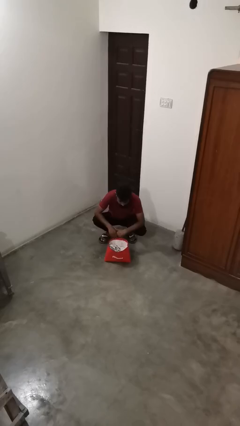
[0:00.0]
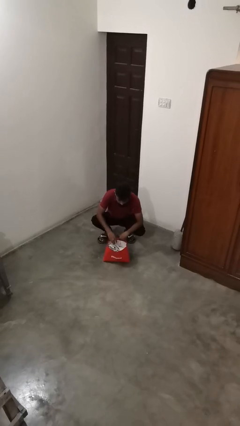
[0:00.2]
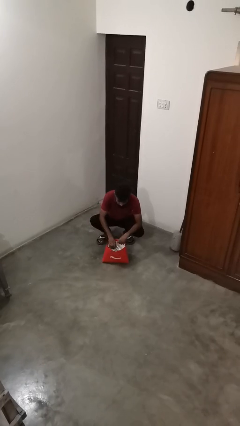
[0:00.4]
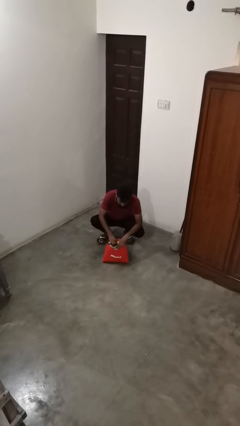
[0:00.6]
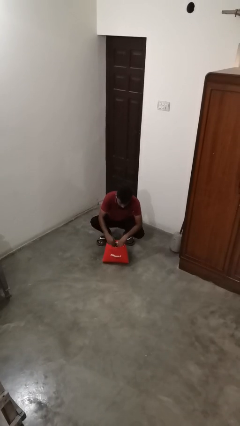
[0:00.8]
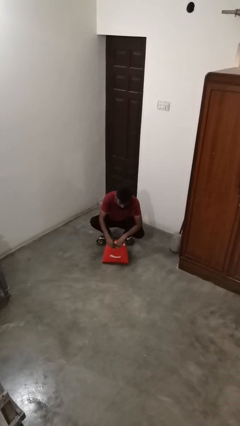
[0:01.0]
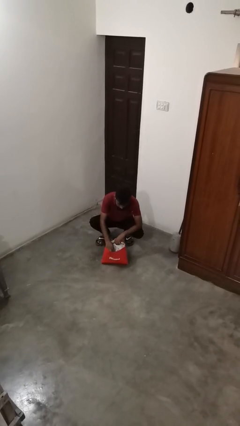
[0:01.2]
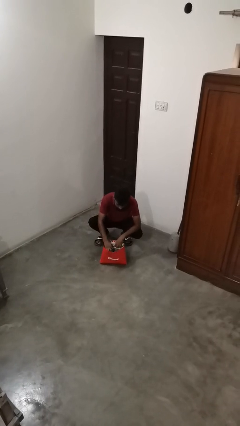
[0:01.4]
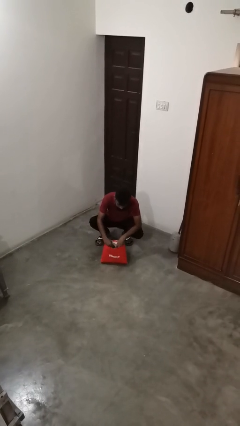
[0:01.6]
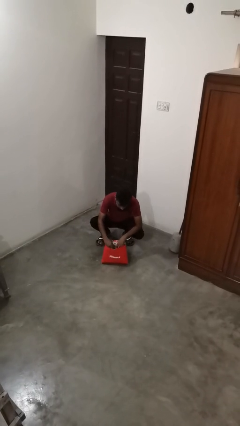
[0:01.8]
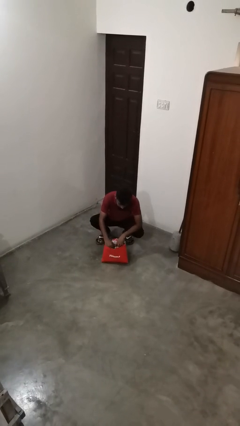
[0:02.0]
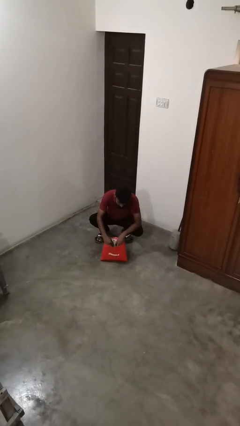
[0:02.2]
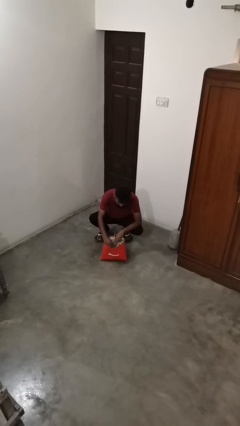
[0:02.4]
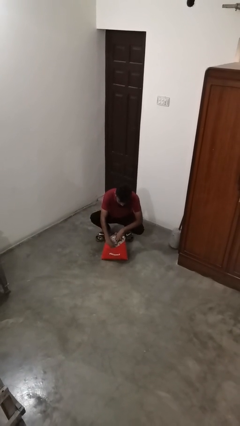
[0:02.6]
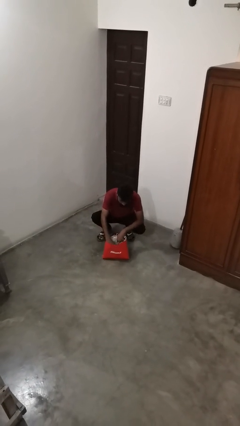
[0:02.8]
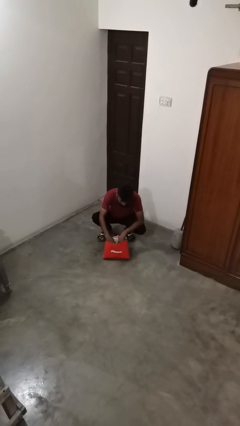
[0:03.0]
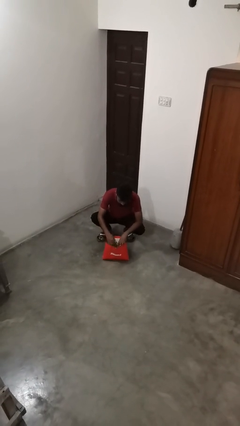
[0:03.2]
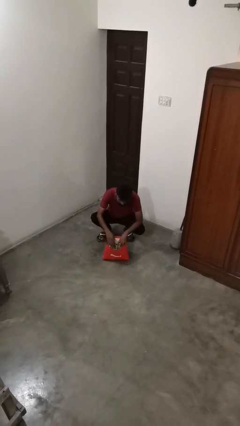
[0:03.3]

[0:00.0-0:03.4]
person searches in bag

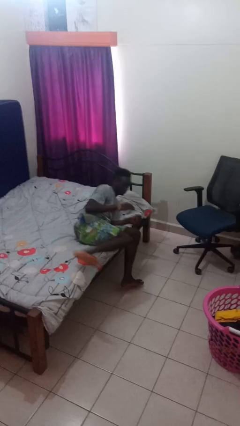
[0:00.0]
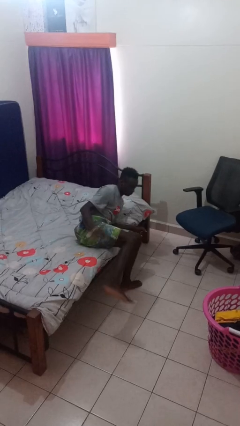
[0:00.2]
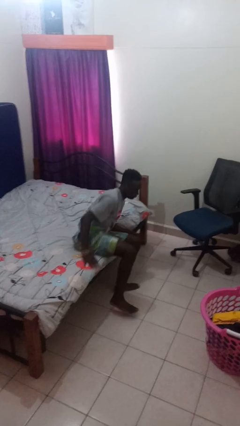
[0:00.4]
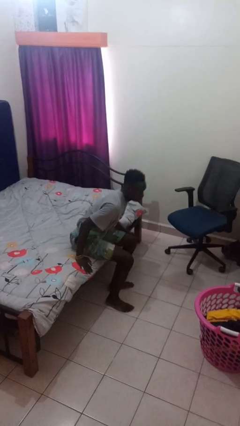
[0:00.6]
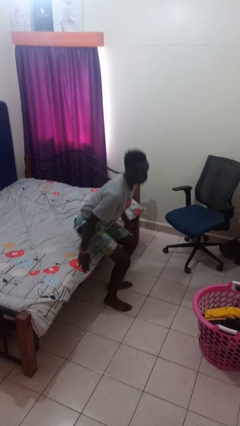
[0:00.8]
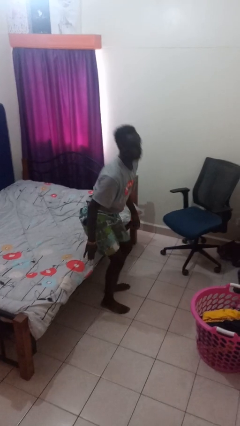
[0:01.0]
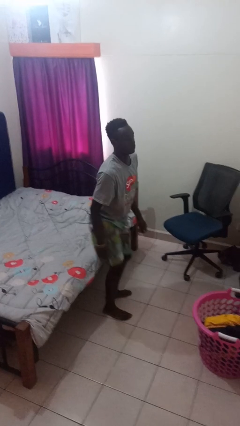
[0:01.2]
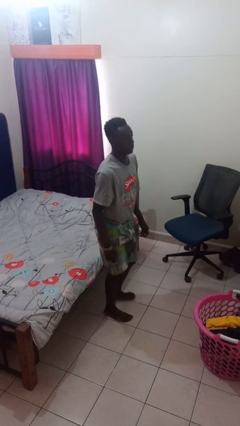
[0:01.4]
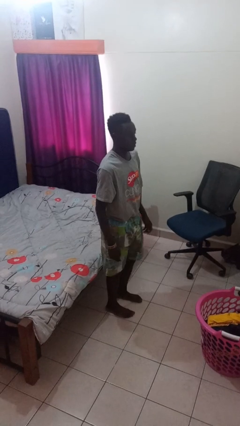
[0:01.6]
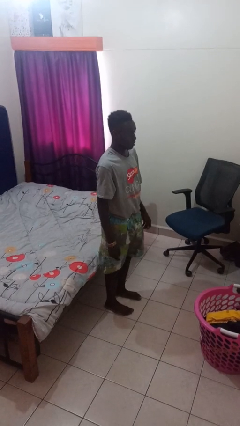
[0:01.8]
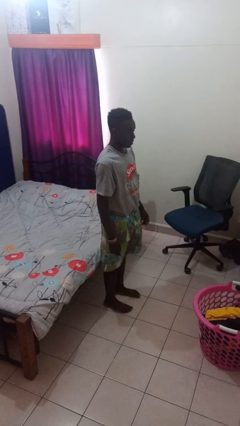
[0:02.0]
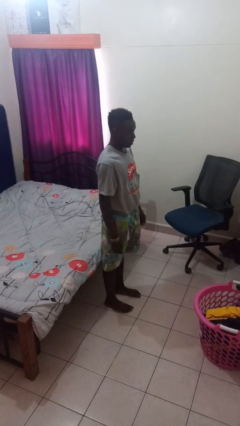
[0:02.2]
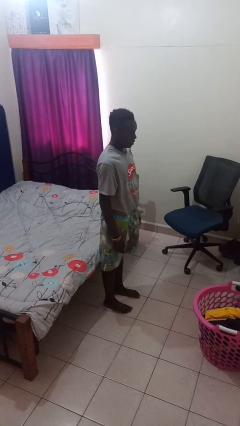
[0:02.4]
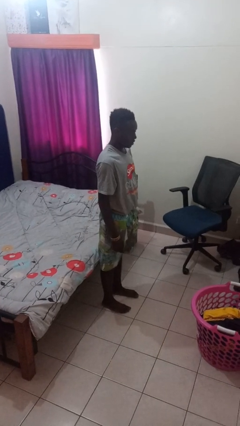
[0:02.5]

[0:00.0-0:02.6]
person stands up

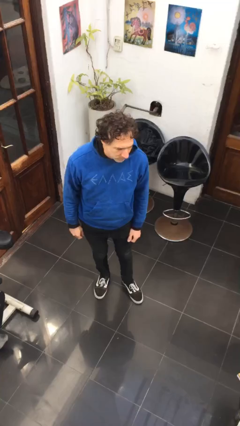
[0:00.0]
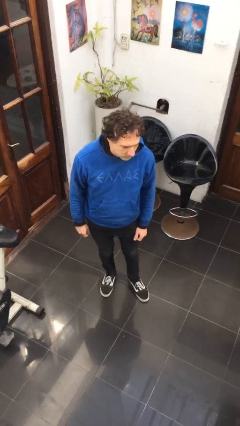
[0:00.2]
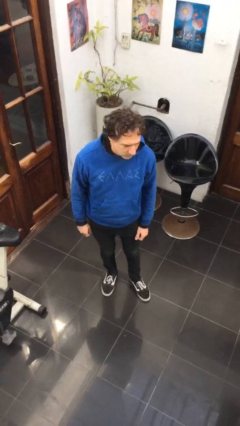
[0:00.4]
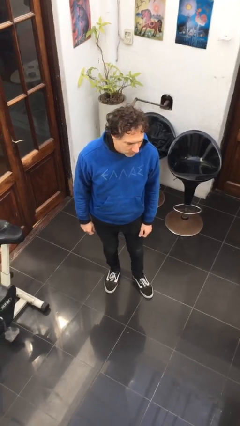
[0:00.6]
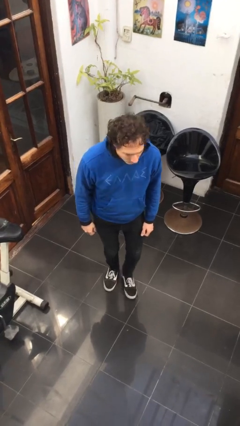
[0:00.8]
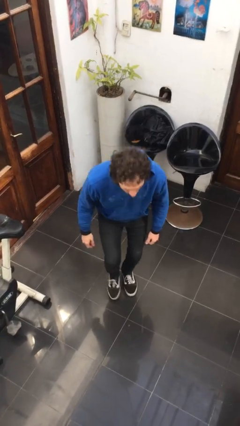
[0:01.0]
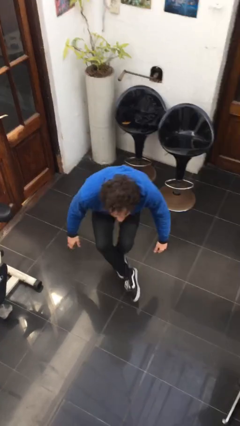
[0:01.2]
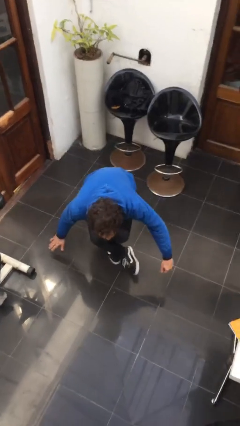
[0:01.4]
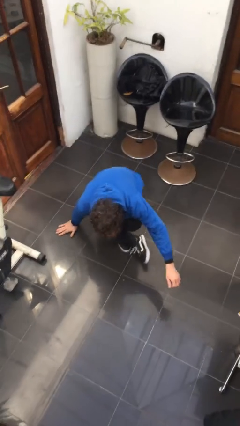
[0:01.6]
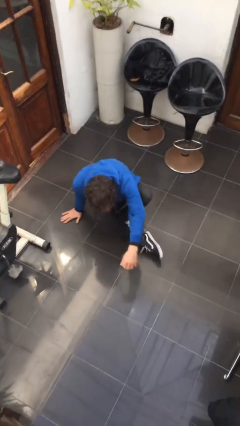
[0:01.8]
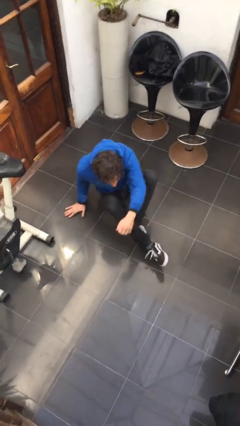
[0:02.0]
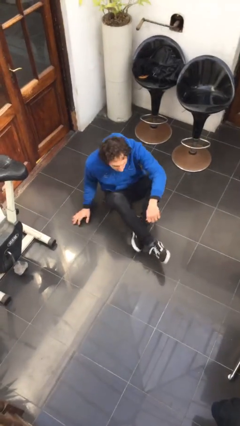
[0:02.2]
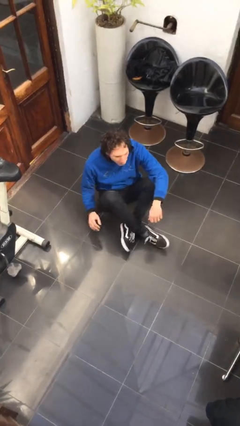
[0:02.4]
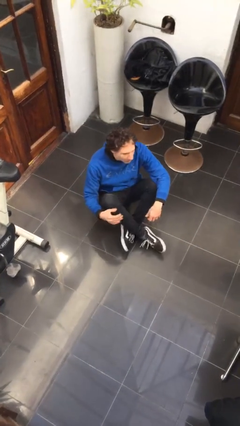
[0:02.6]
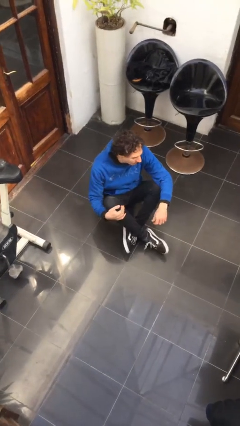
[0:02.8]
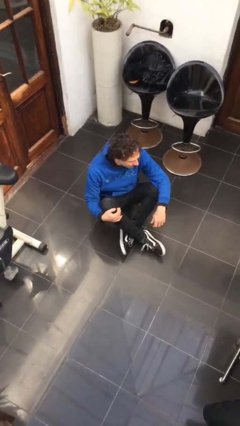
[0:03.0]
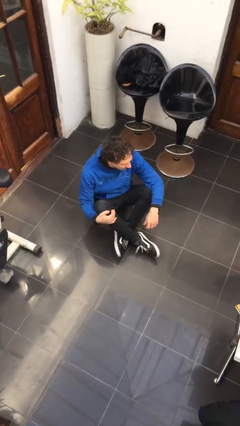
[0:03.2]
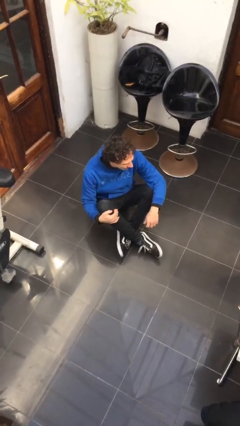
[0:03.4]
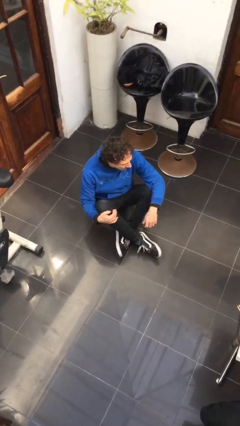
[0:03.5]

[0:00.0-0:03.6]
person sits crisscross

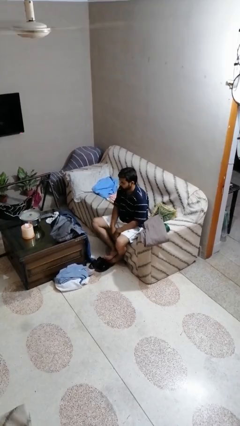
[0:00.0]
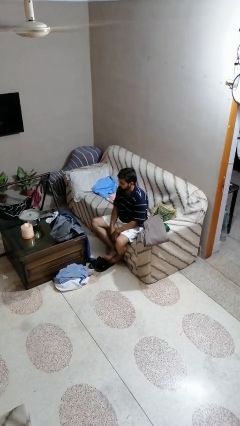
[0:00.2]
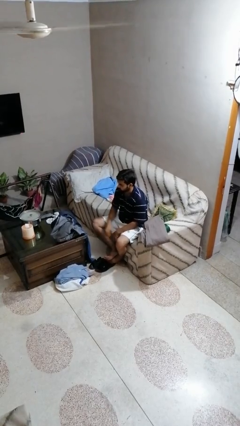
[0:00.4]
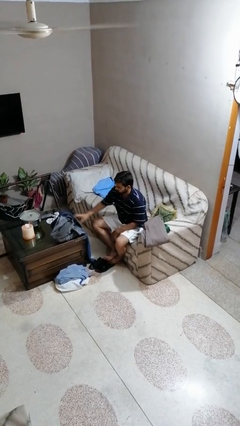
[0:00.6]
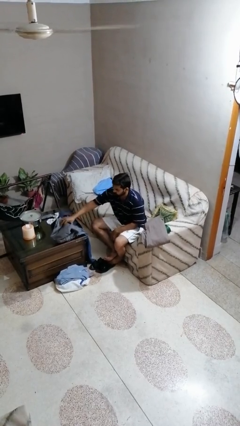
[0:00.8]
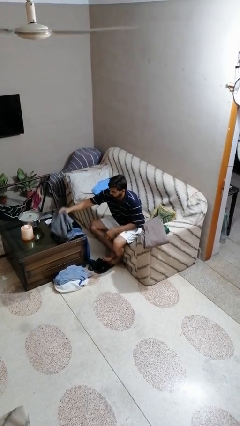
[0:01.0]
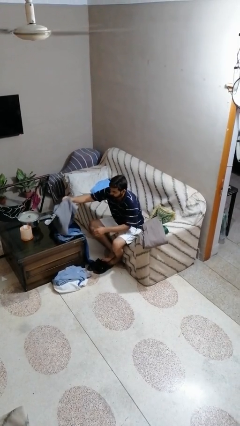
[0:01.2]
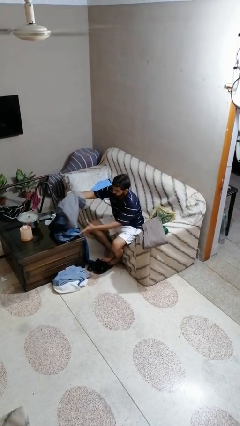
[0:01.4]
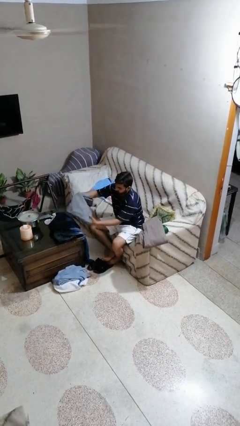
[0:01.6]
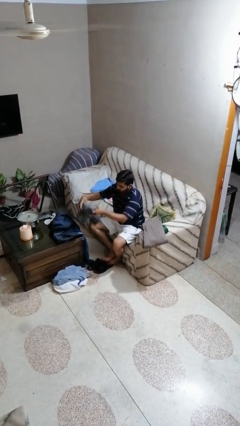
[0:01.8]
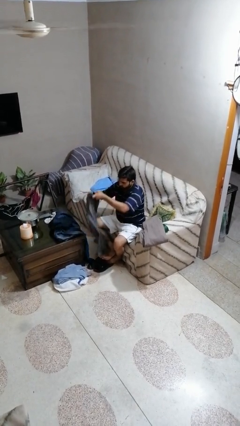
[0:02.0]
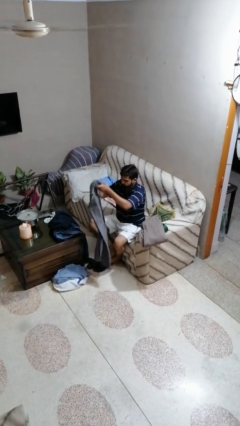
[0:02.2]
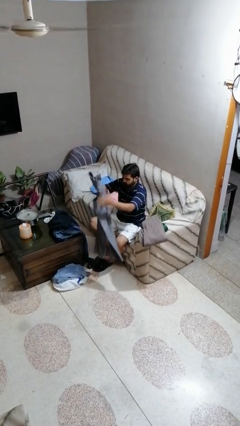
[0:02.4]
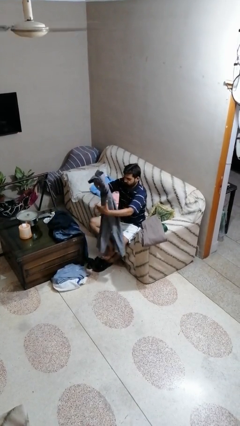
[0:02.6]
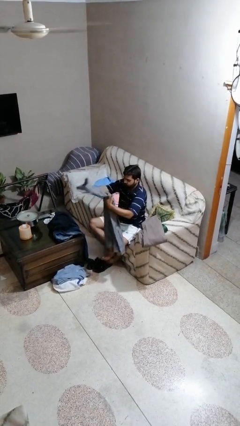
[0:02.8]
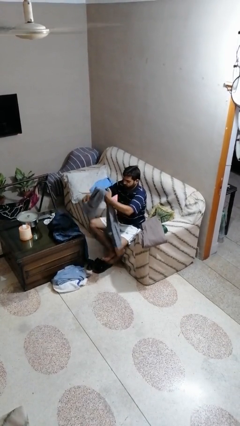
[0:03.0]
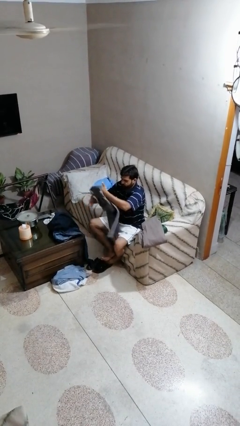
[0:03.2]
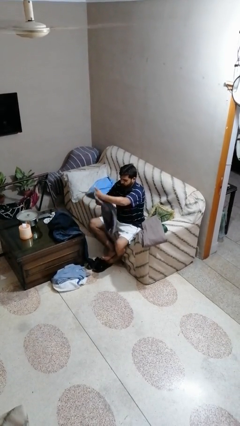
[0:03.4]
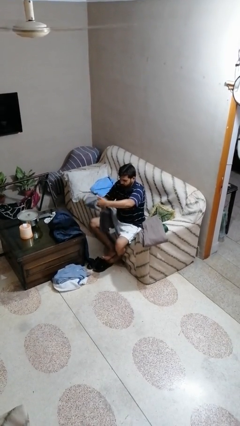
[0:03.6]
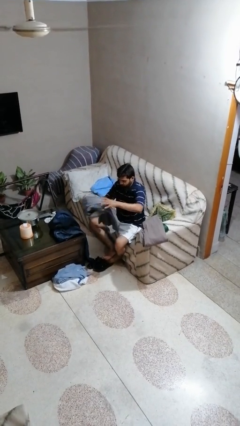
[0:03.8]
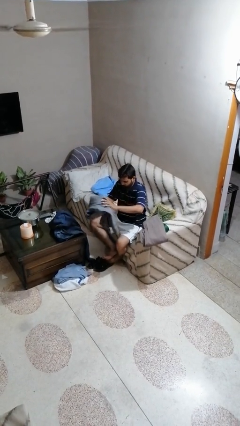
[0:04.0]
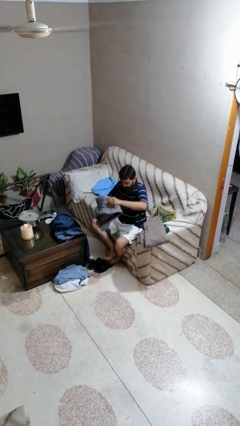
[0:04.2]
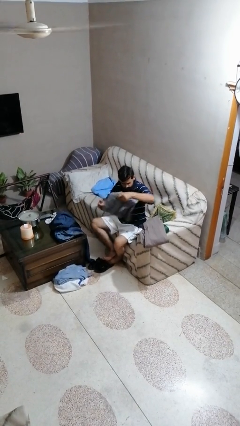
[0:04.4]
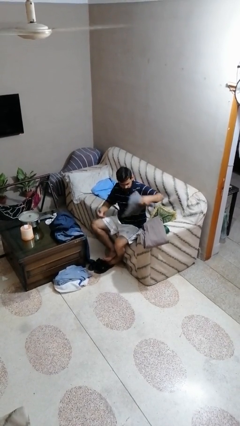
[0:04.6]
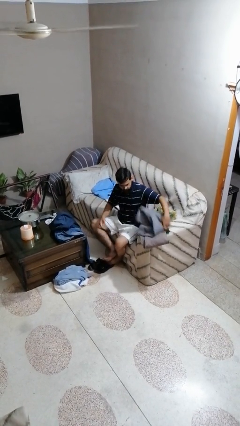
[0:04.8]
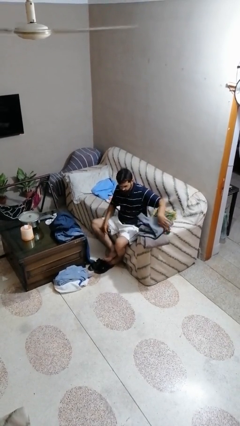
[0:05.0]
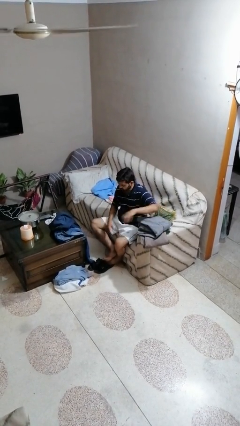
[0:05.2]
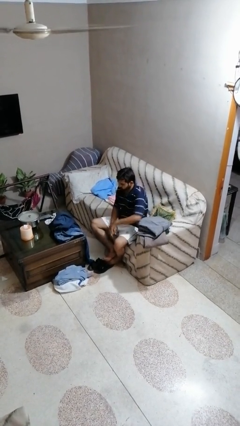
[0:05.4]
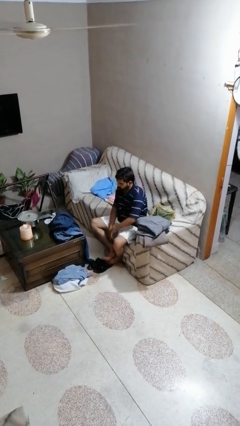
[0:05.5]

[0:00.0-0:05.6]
person folds pants

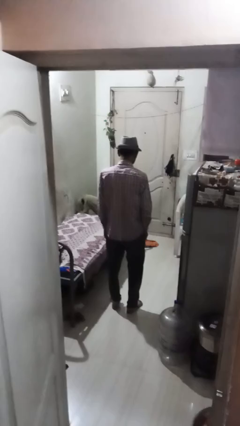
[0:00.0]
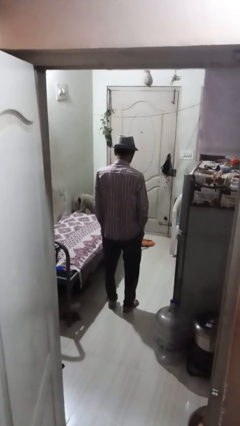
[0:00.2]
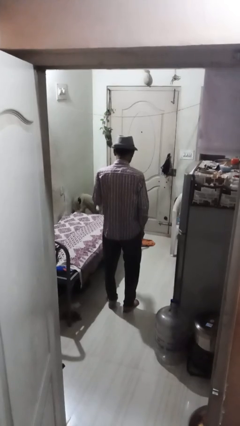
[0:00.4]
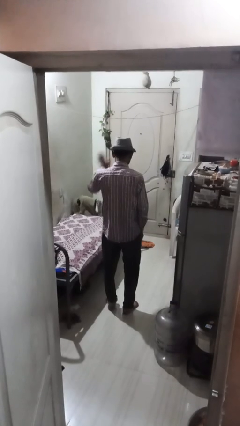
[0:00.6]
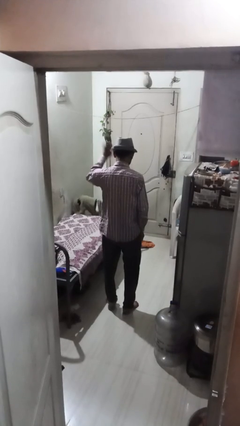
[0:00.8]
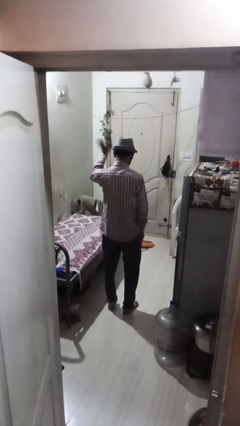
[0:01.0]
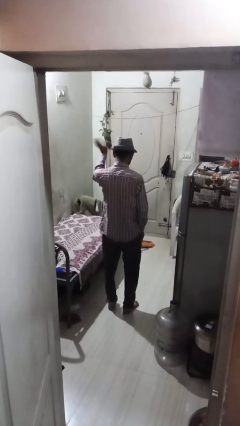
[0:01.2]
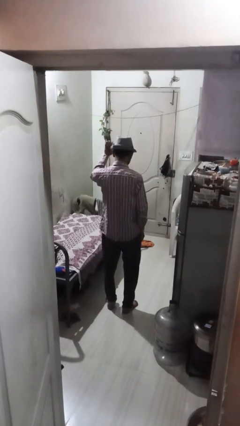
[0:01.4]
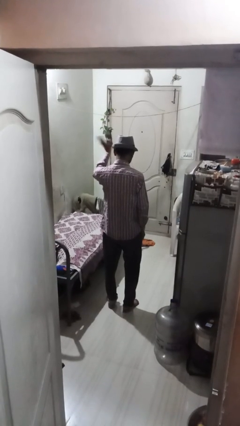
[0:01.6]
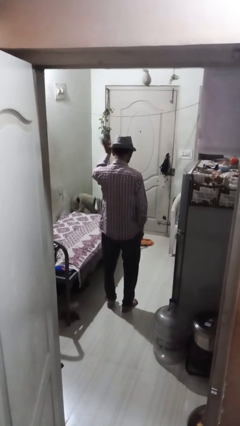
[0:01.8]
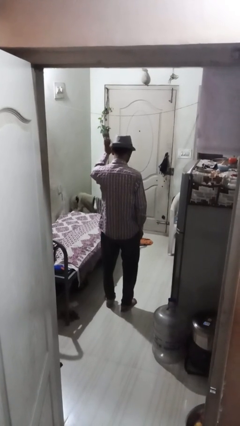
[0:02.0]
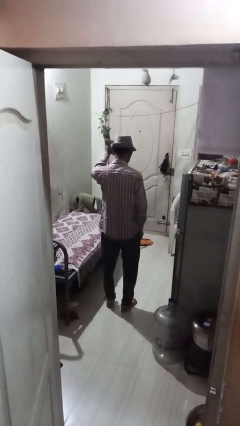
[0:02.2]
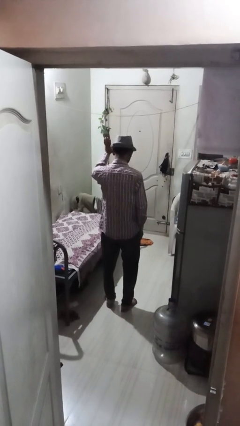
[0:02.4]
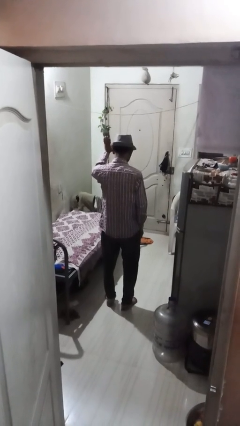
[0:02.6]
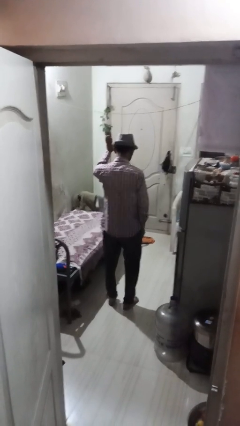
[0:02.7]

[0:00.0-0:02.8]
person waves at person
